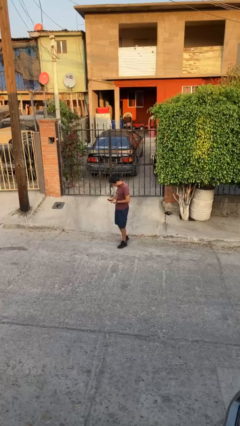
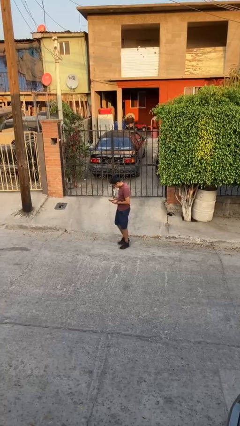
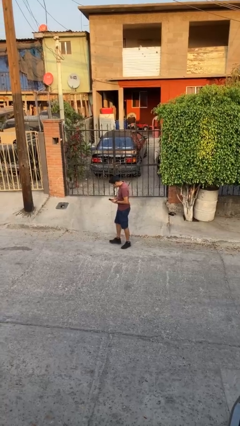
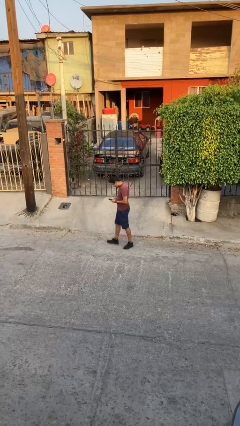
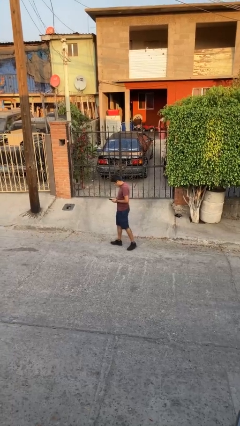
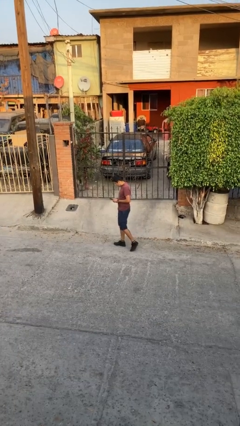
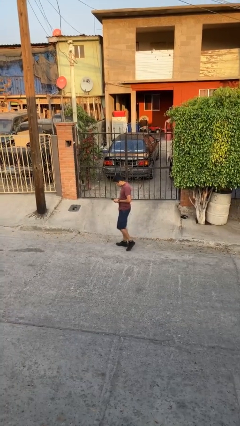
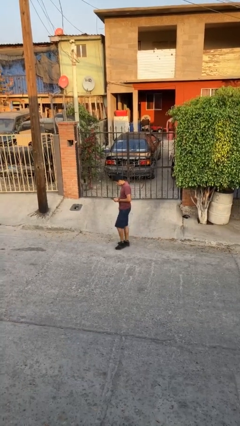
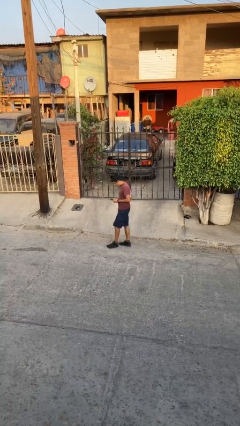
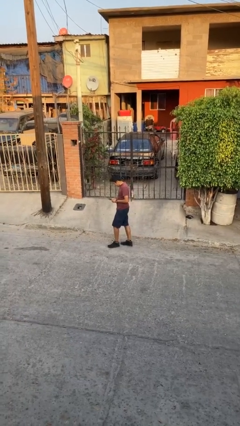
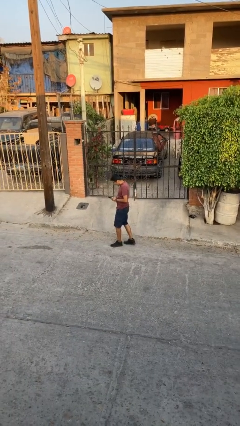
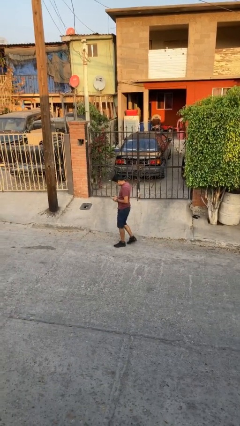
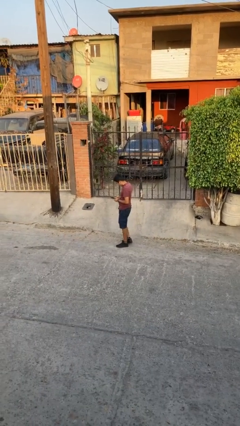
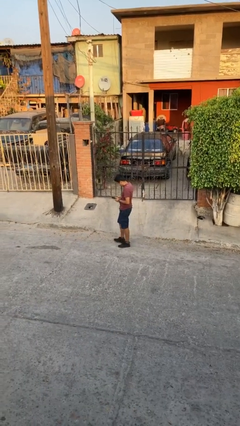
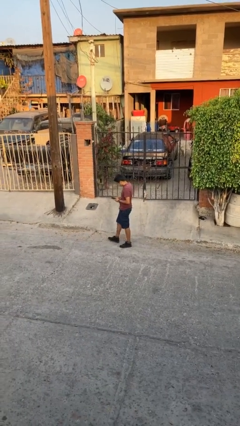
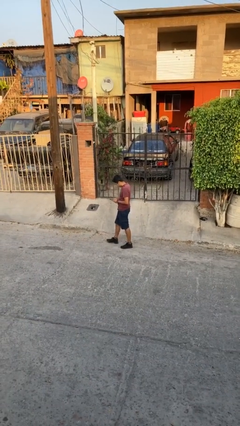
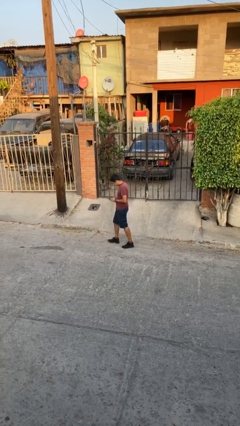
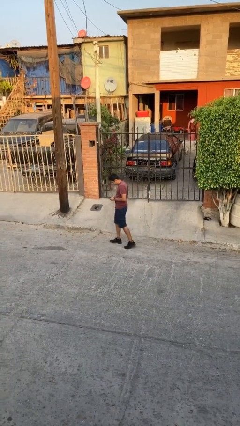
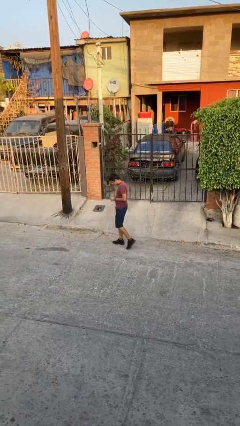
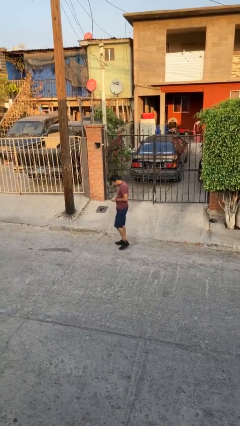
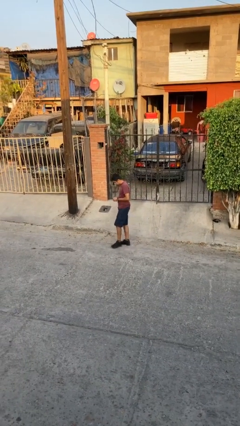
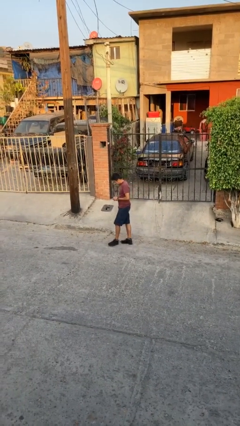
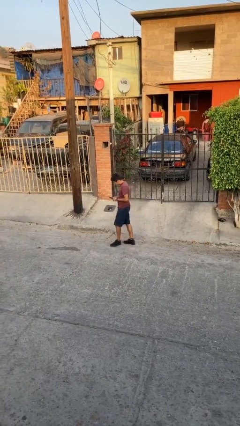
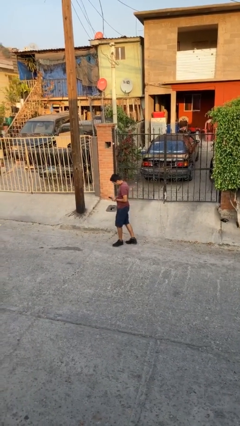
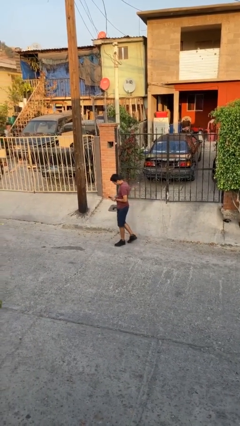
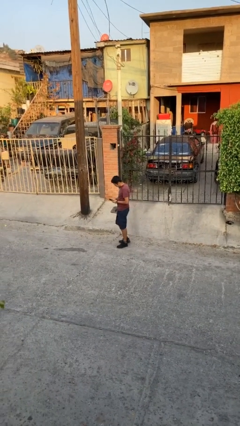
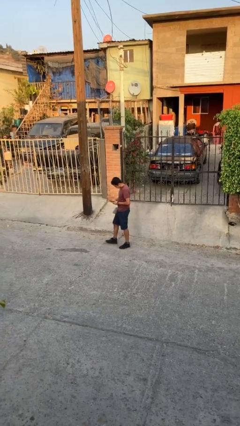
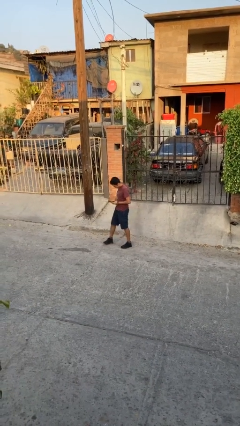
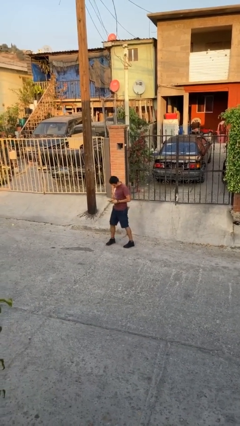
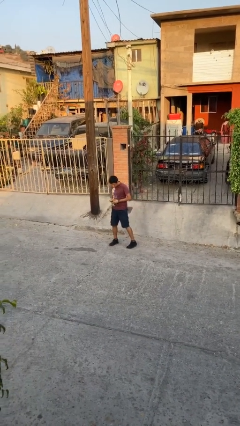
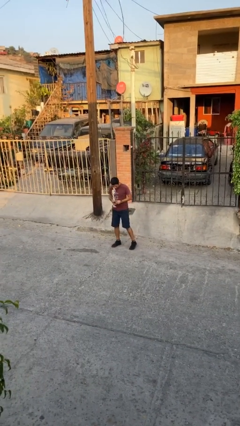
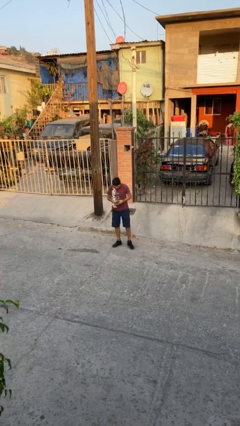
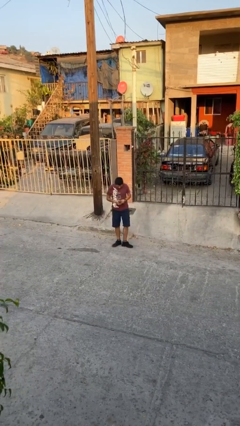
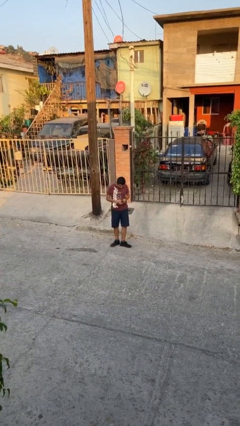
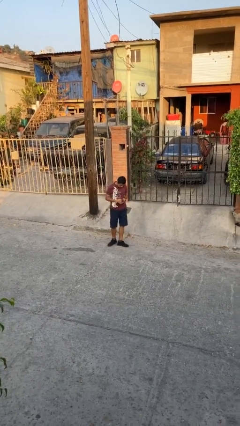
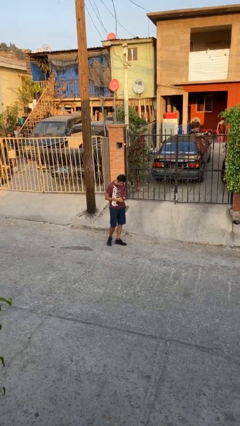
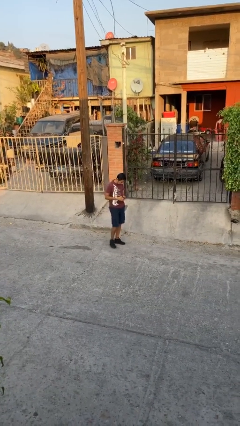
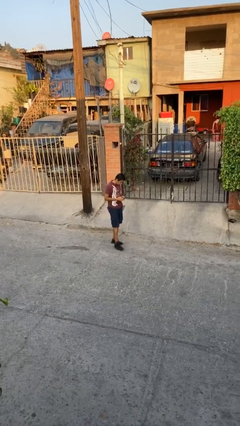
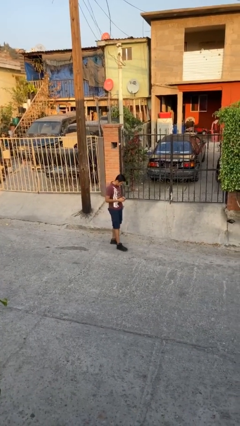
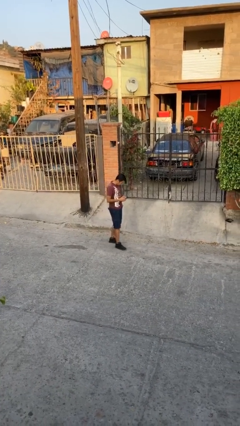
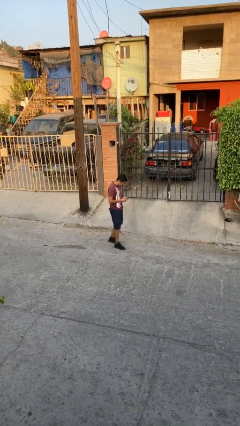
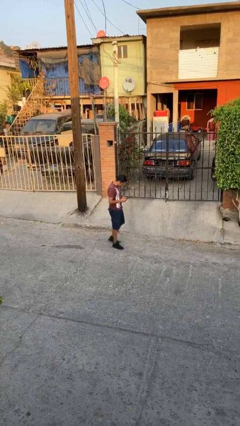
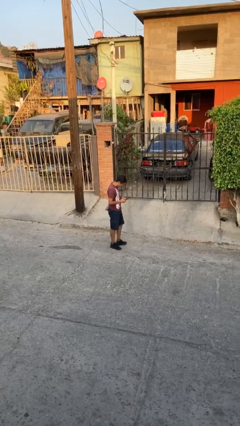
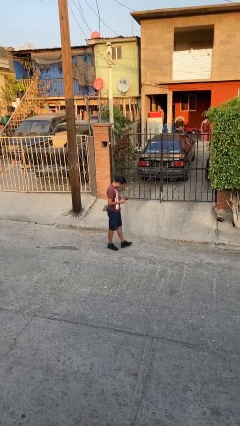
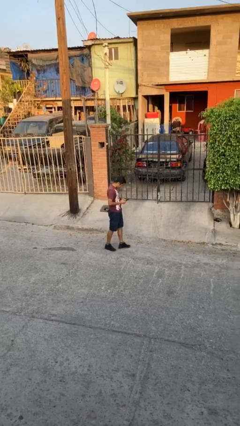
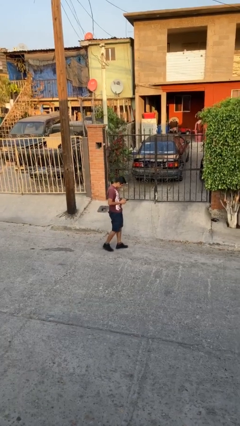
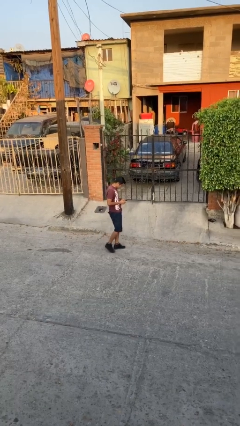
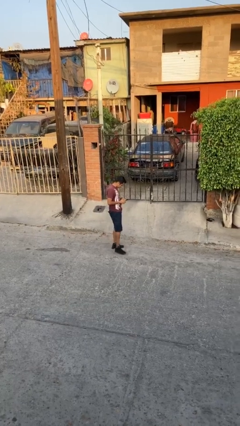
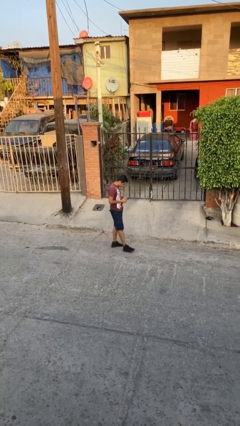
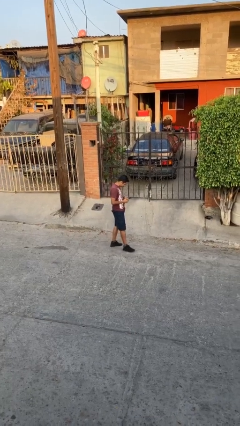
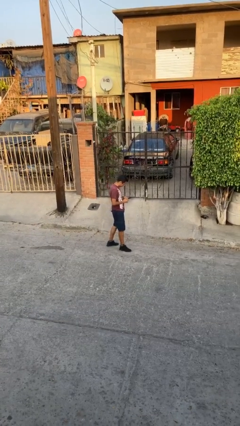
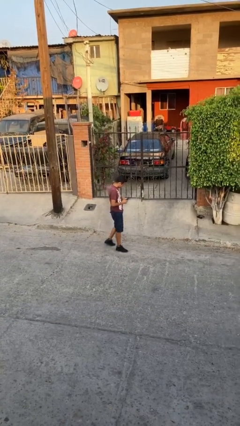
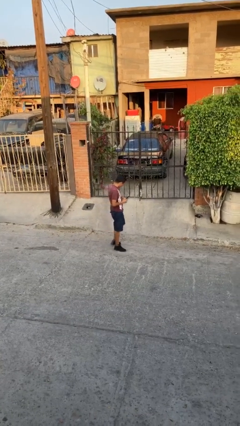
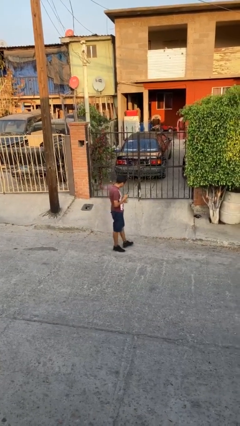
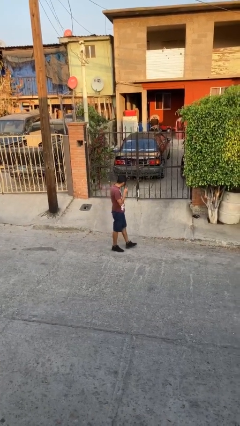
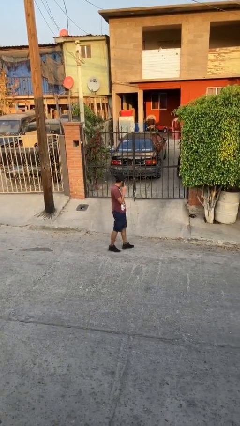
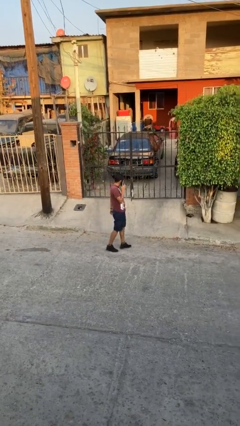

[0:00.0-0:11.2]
person texts on phone

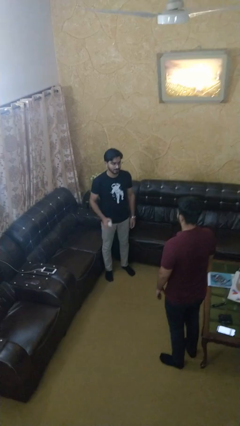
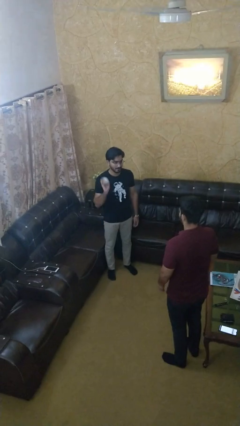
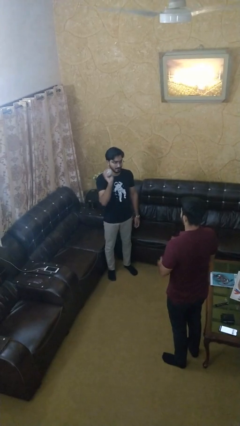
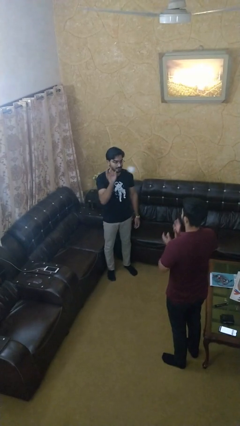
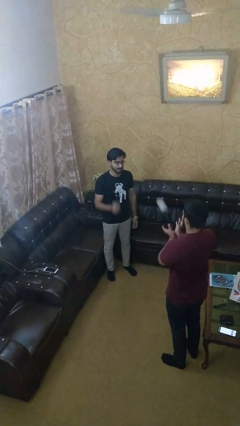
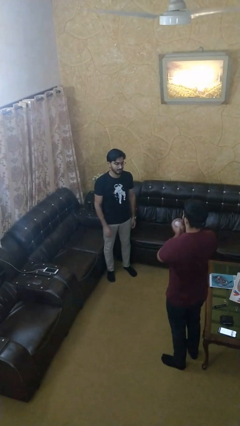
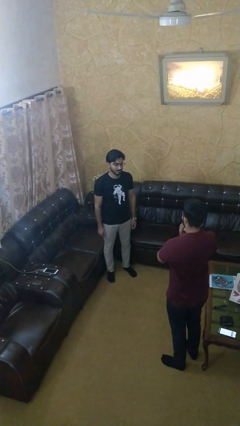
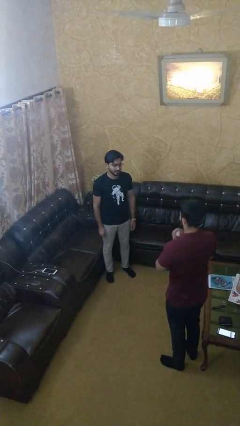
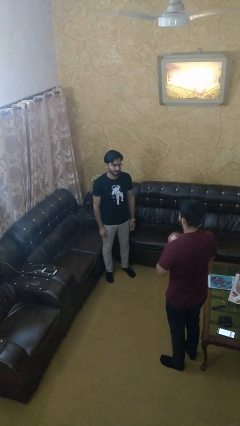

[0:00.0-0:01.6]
person throws object to person

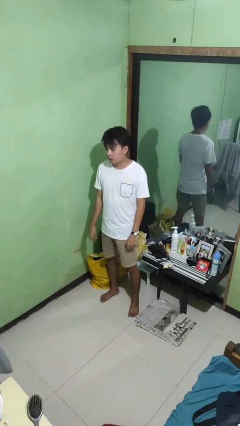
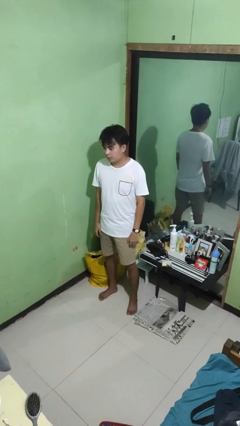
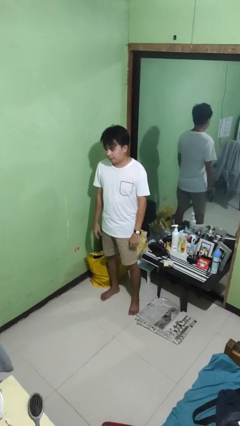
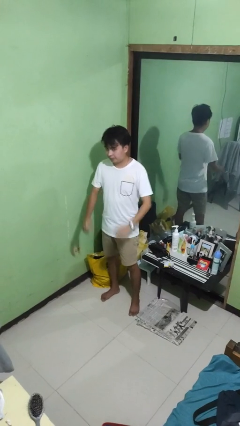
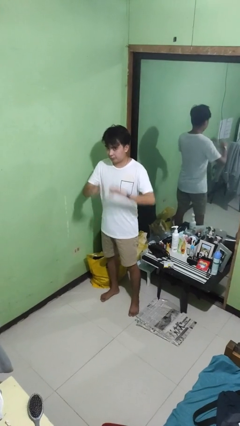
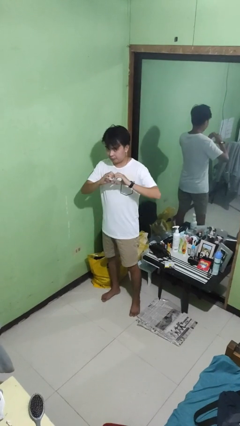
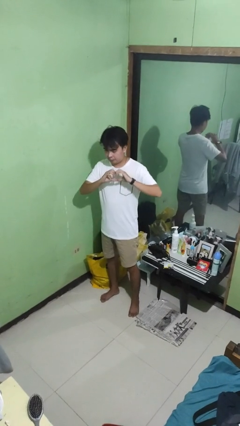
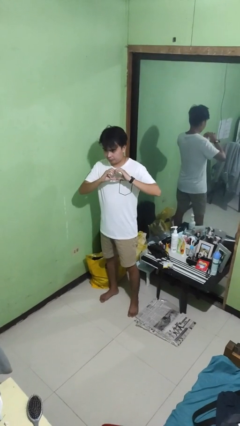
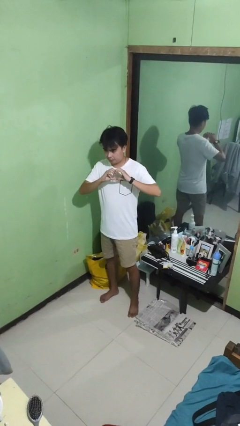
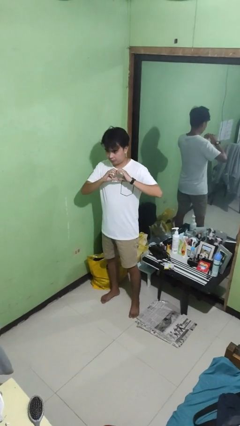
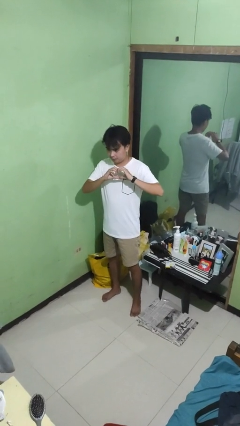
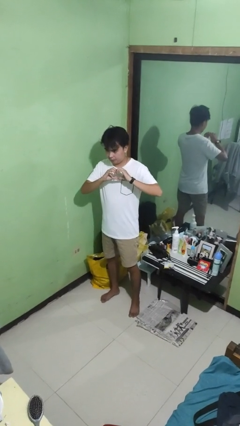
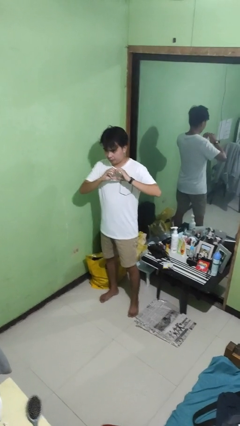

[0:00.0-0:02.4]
person gestures heart

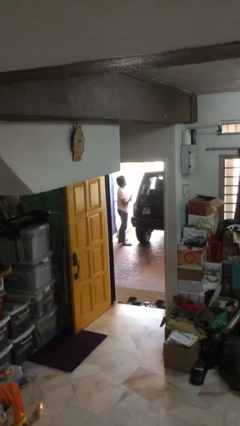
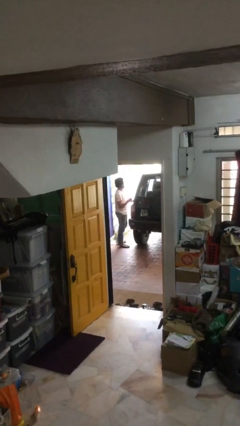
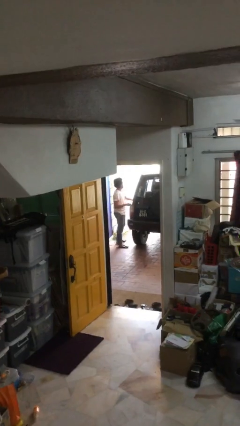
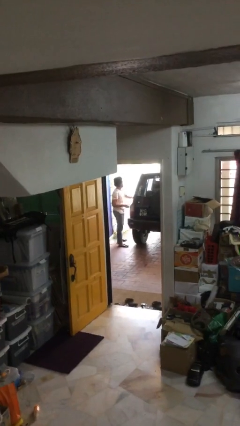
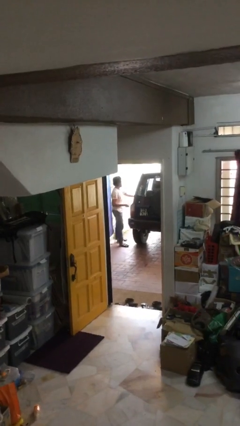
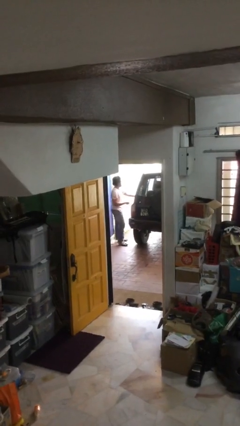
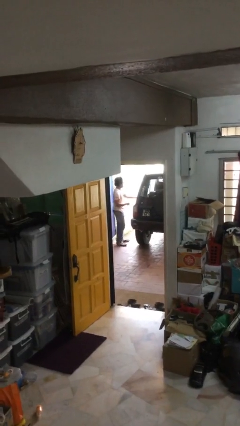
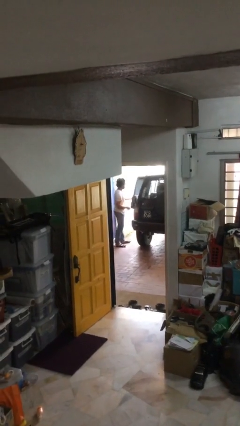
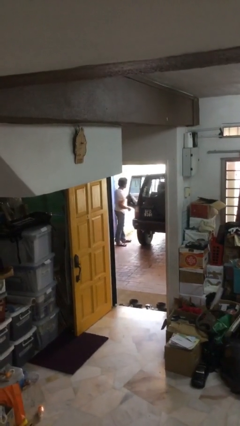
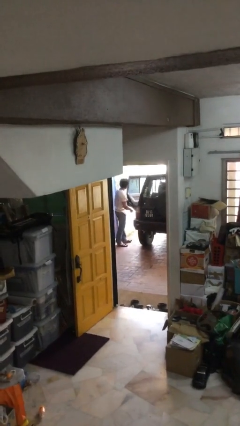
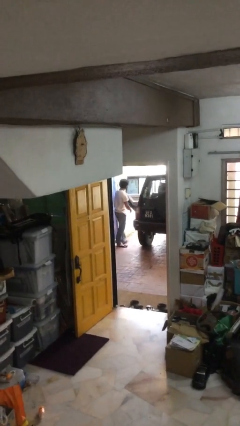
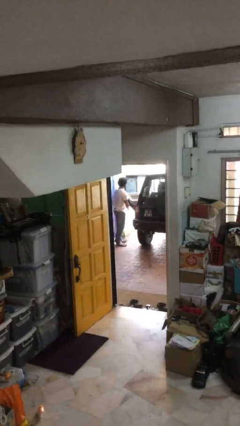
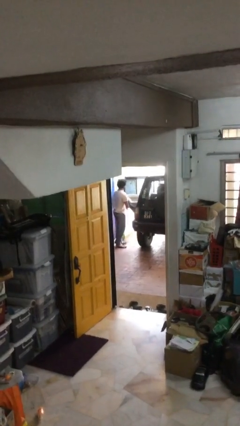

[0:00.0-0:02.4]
person opens car door

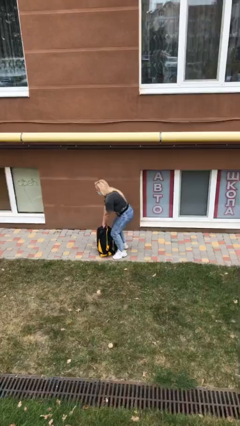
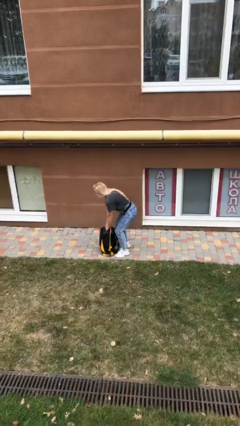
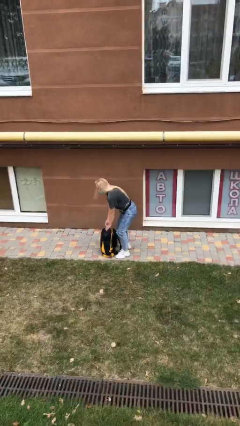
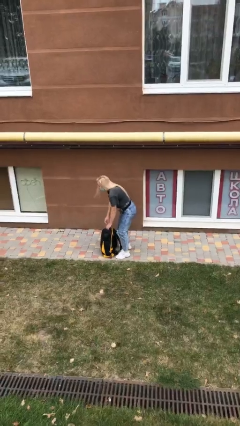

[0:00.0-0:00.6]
person puts down object on floor
